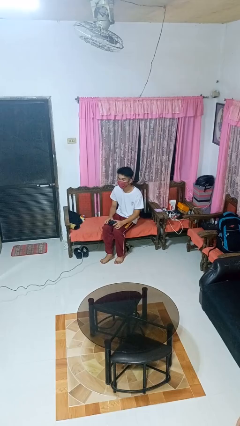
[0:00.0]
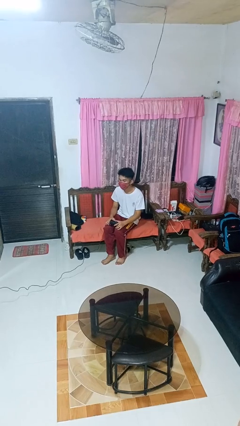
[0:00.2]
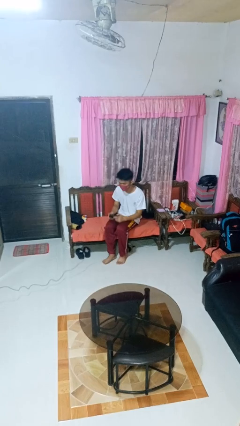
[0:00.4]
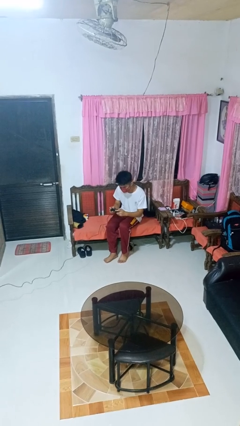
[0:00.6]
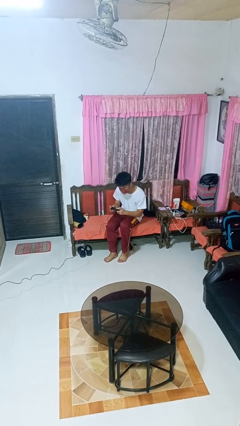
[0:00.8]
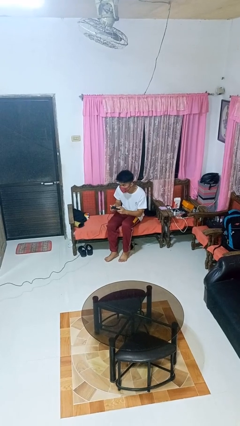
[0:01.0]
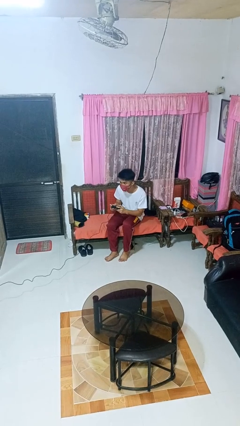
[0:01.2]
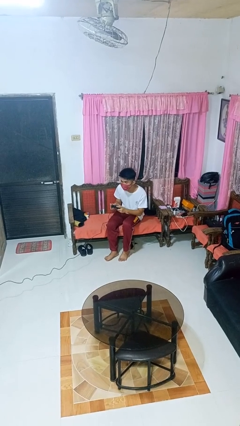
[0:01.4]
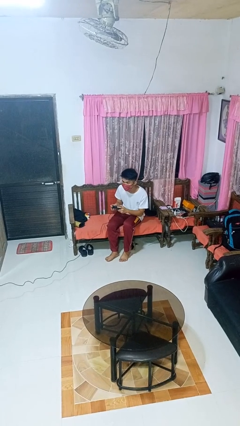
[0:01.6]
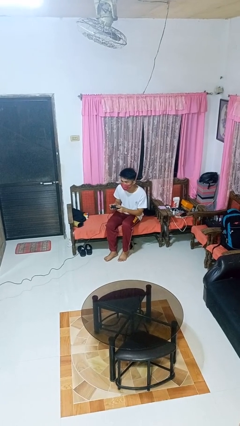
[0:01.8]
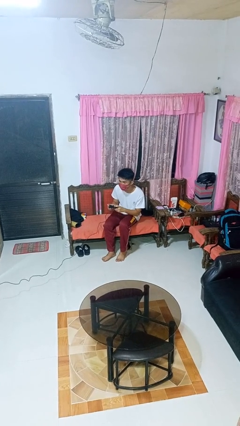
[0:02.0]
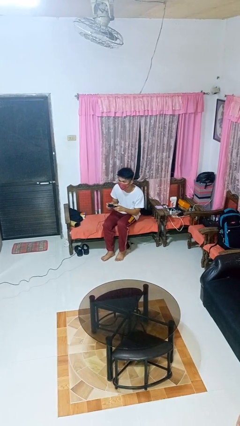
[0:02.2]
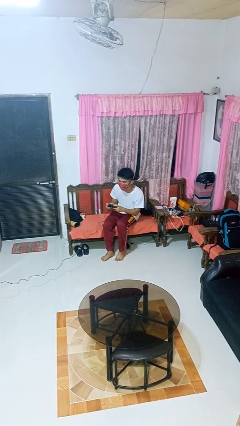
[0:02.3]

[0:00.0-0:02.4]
person interacts with handheld game

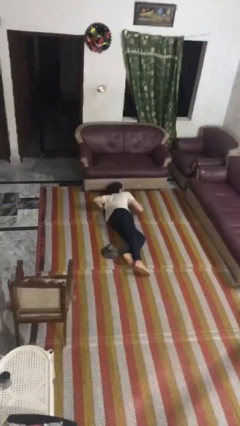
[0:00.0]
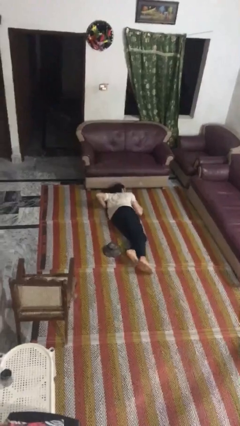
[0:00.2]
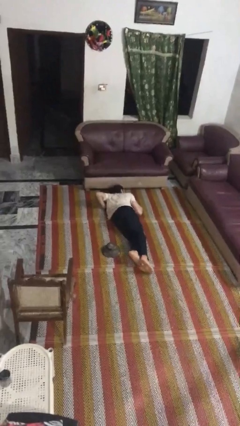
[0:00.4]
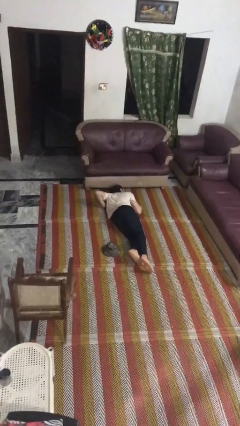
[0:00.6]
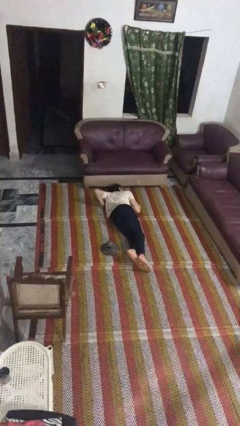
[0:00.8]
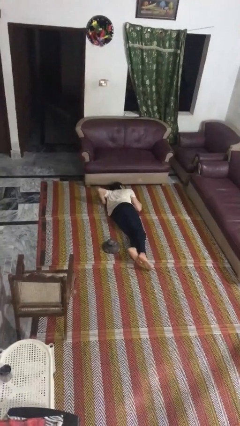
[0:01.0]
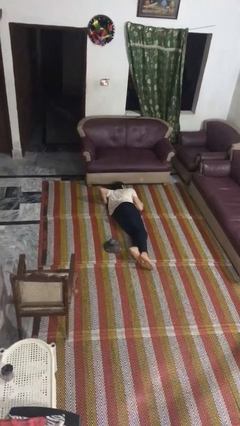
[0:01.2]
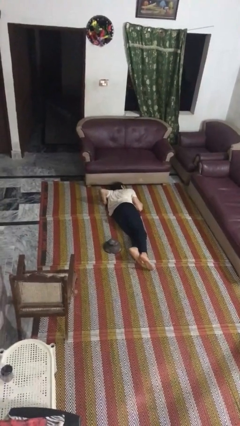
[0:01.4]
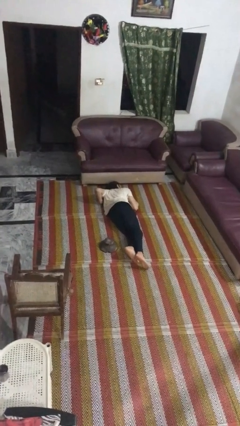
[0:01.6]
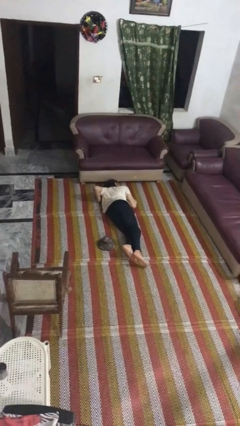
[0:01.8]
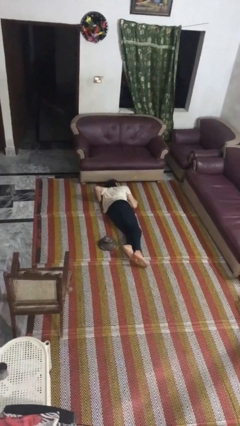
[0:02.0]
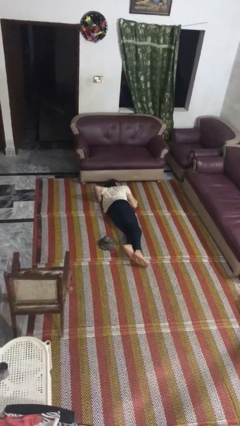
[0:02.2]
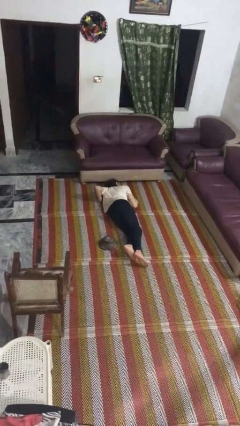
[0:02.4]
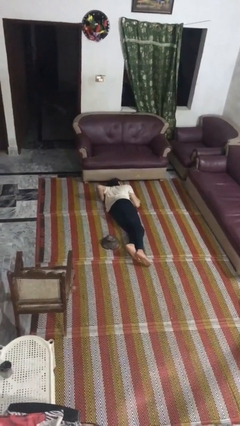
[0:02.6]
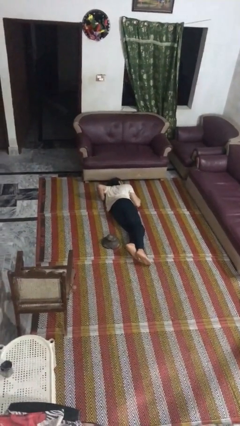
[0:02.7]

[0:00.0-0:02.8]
person lies down on floor

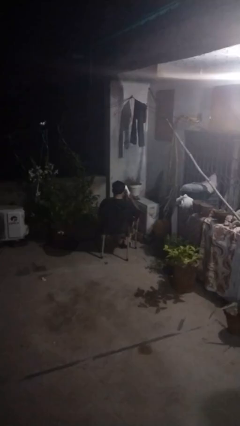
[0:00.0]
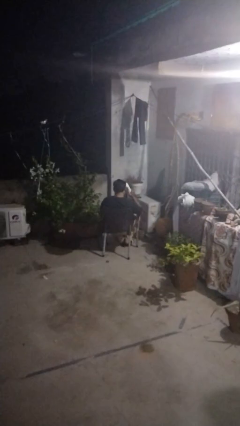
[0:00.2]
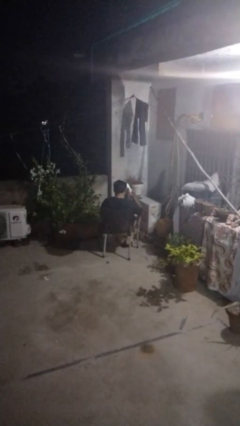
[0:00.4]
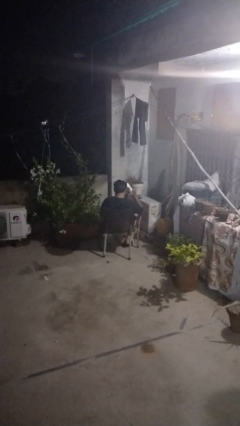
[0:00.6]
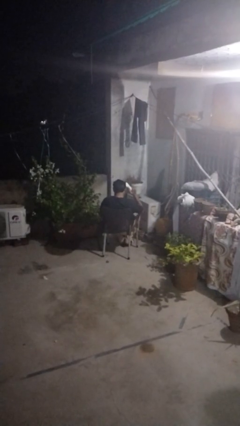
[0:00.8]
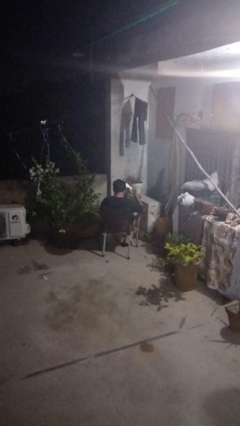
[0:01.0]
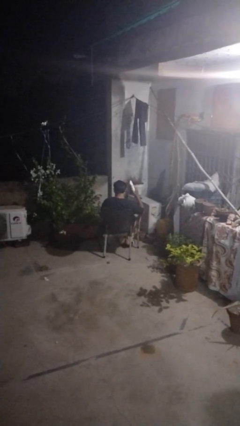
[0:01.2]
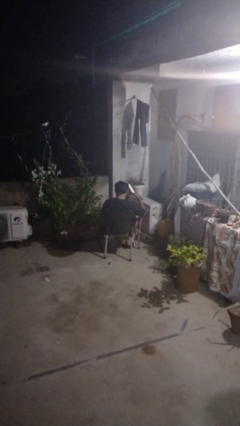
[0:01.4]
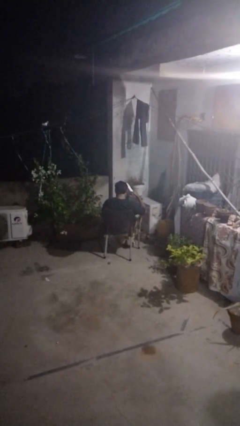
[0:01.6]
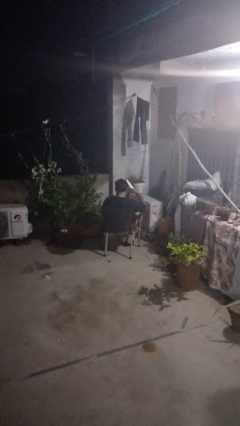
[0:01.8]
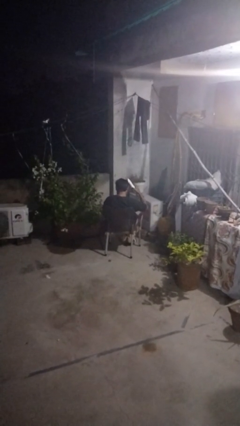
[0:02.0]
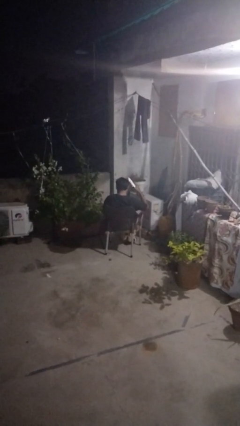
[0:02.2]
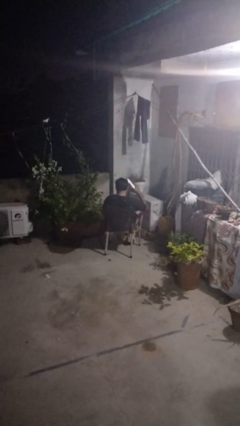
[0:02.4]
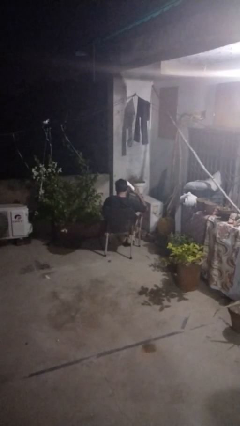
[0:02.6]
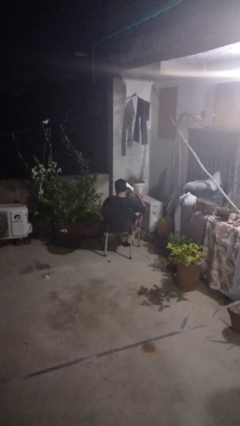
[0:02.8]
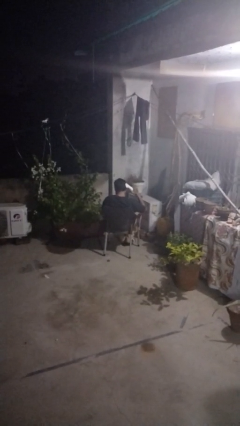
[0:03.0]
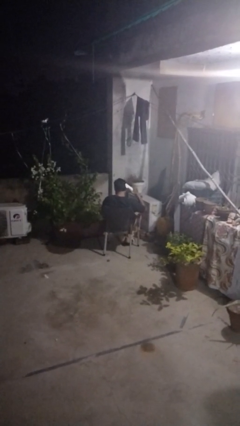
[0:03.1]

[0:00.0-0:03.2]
person dries hair with hairdryer

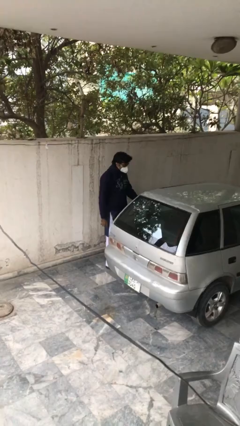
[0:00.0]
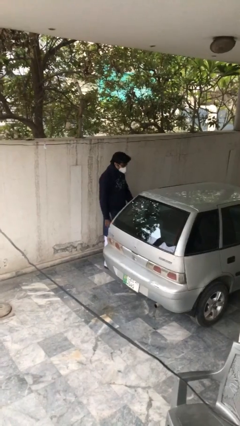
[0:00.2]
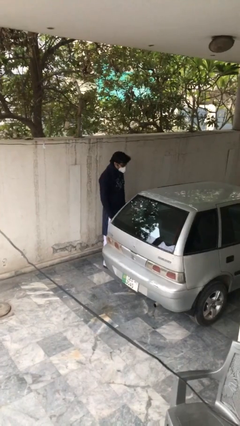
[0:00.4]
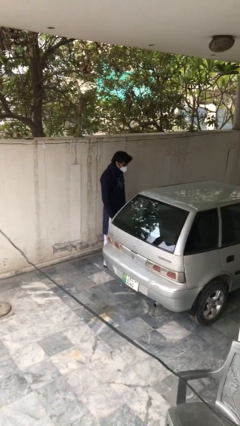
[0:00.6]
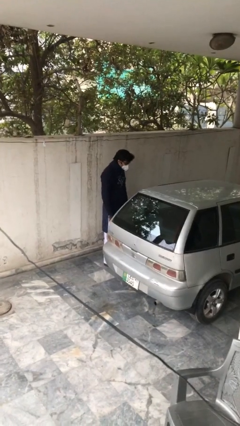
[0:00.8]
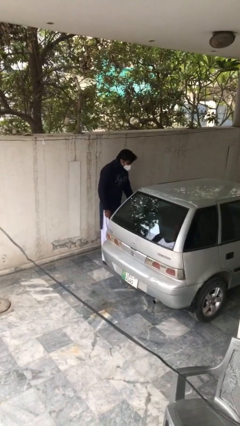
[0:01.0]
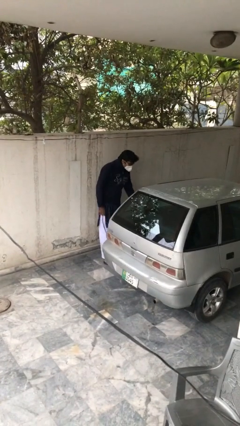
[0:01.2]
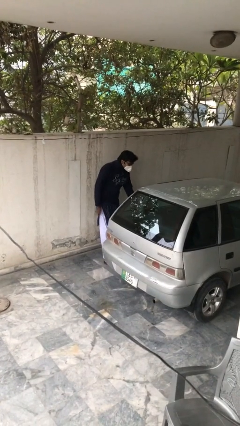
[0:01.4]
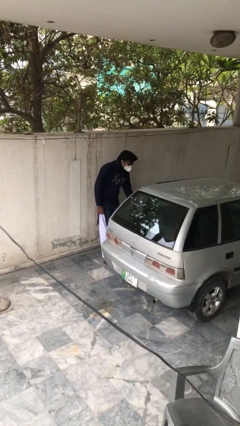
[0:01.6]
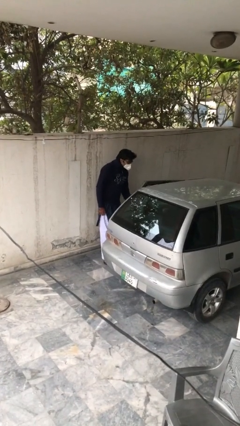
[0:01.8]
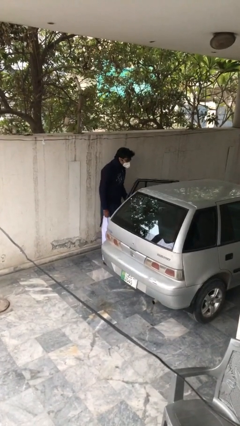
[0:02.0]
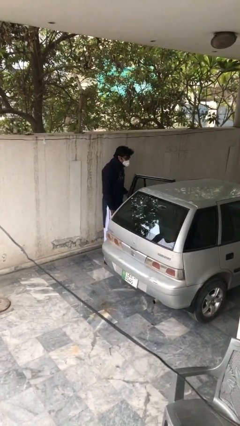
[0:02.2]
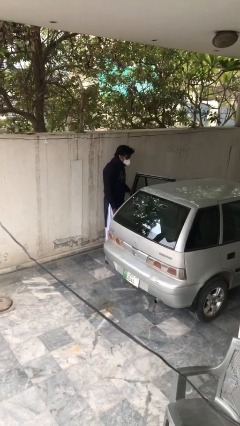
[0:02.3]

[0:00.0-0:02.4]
person opens car door

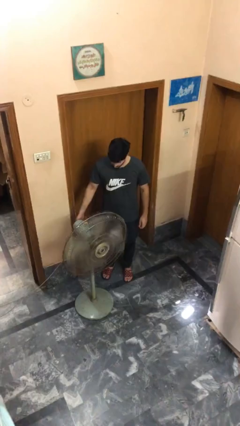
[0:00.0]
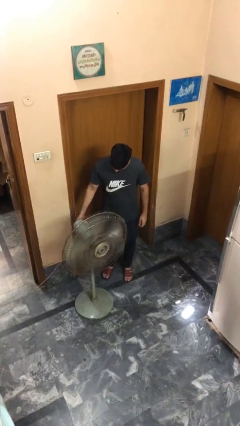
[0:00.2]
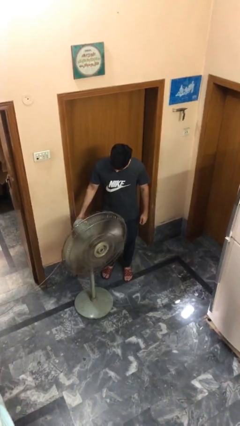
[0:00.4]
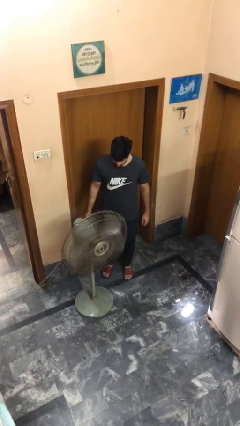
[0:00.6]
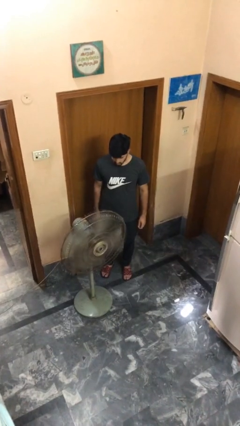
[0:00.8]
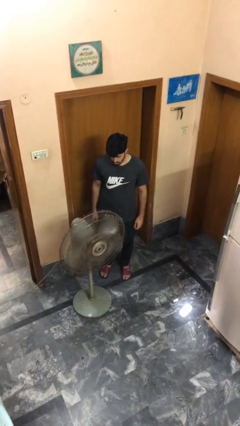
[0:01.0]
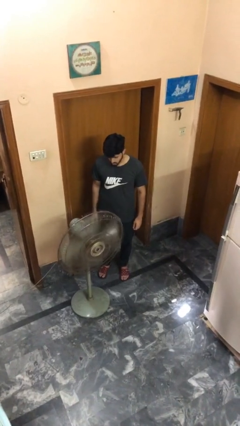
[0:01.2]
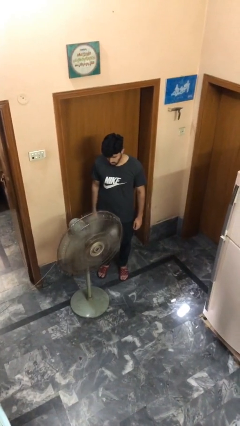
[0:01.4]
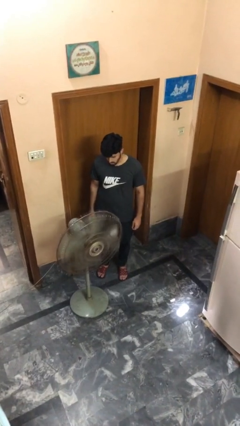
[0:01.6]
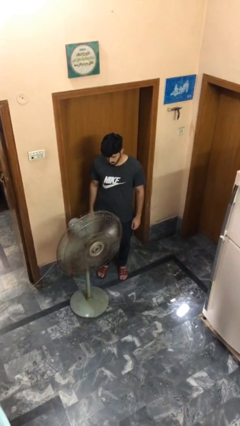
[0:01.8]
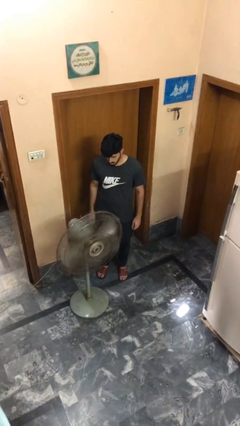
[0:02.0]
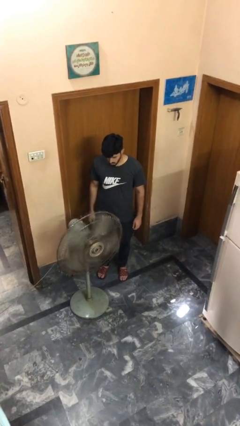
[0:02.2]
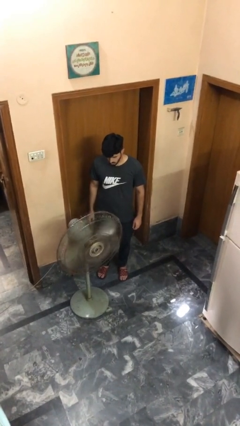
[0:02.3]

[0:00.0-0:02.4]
person turns off fan

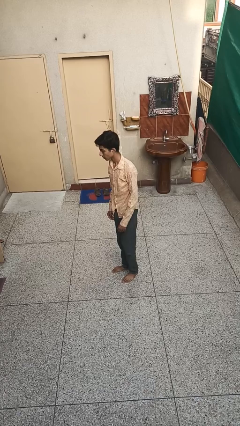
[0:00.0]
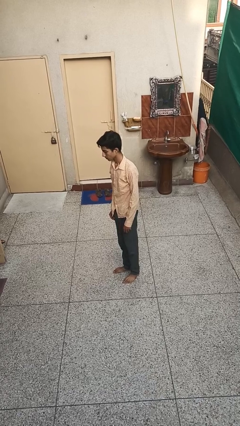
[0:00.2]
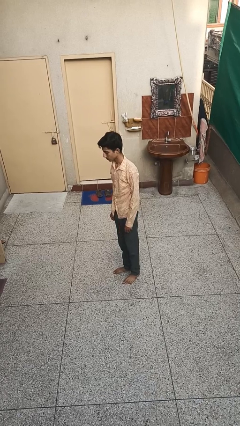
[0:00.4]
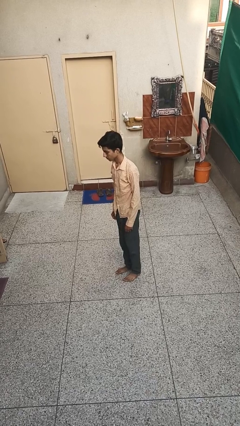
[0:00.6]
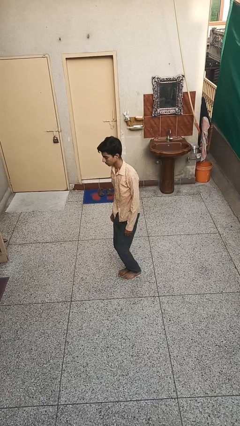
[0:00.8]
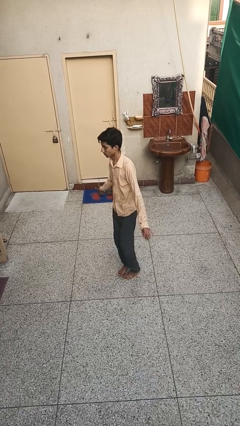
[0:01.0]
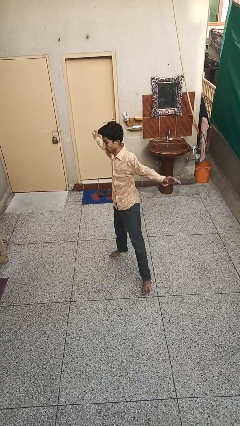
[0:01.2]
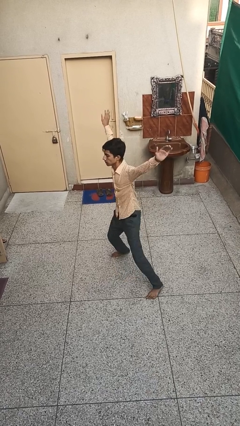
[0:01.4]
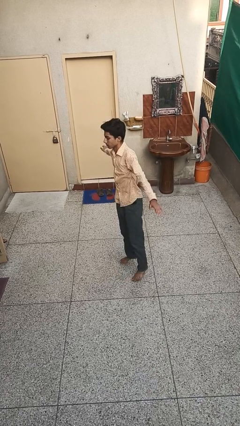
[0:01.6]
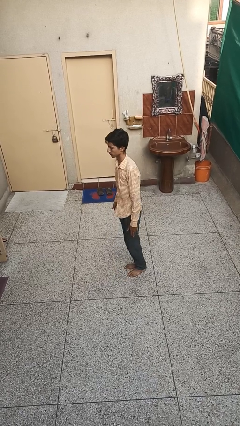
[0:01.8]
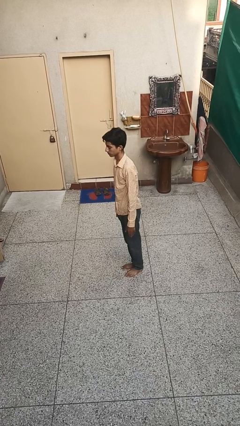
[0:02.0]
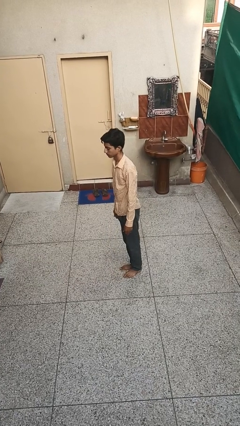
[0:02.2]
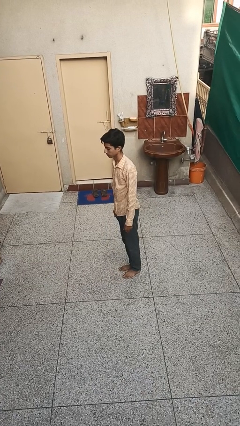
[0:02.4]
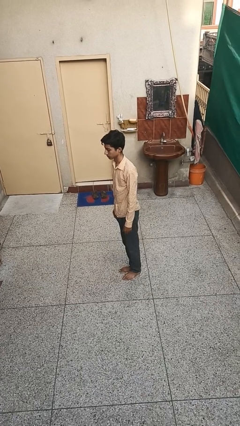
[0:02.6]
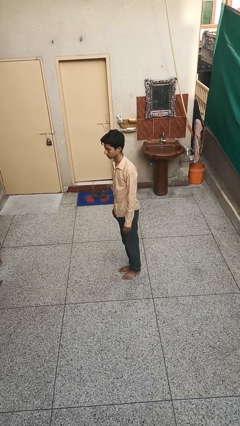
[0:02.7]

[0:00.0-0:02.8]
person exercises with jumping jacks

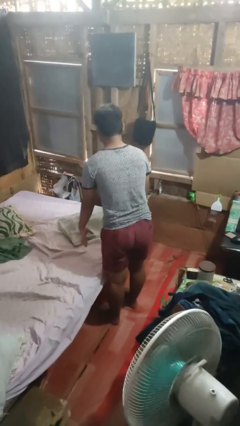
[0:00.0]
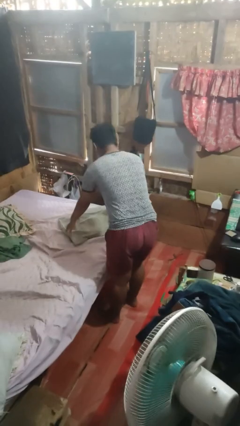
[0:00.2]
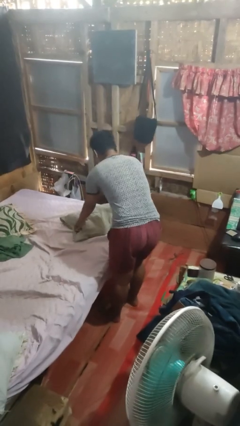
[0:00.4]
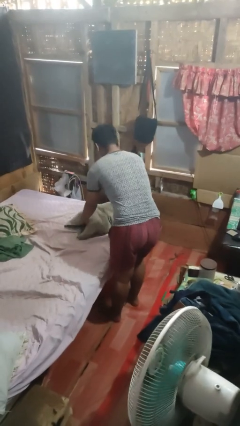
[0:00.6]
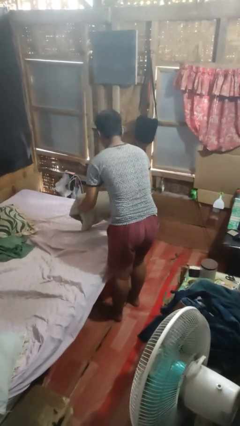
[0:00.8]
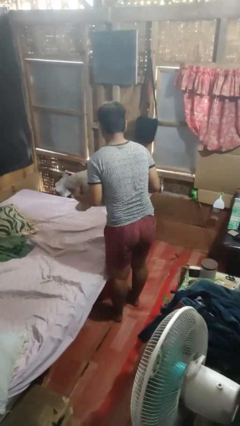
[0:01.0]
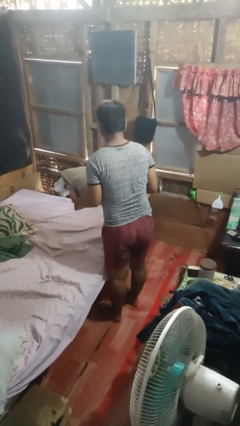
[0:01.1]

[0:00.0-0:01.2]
person picks up object from bed
